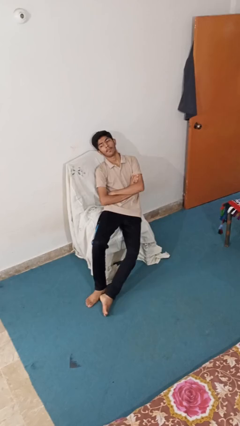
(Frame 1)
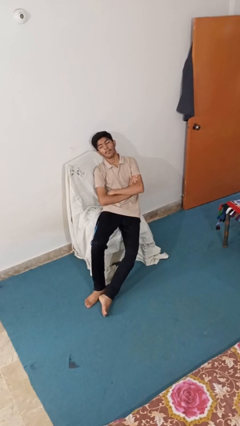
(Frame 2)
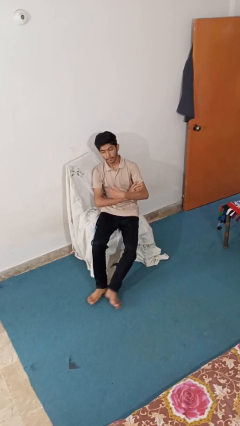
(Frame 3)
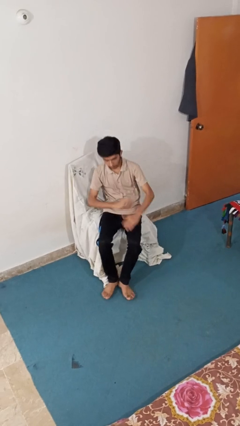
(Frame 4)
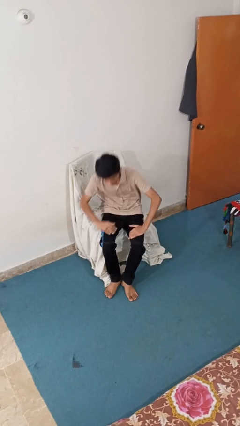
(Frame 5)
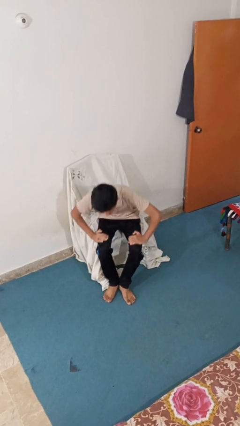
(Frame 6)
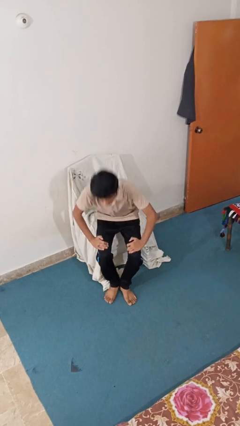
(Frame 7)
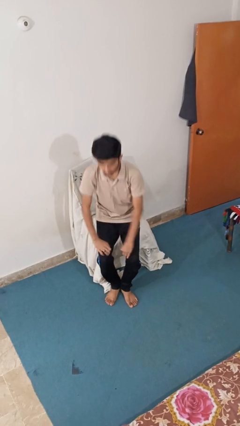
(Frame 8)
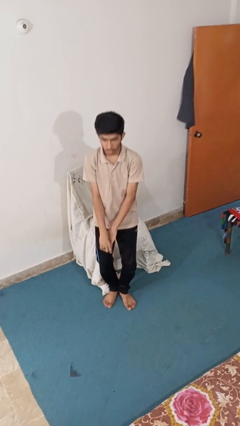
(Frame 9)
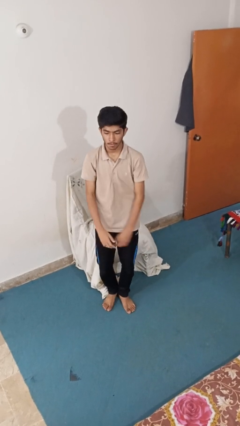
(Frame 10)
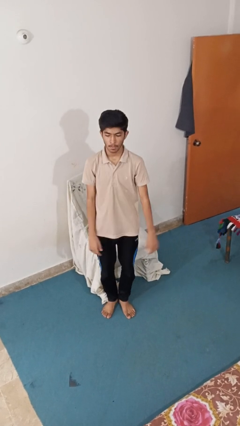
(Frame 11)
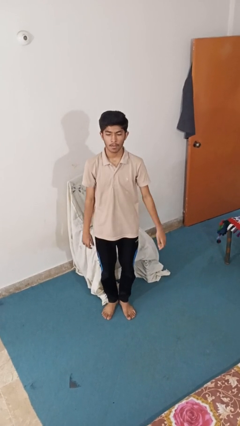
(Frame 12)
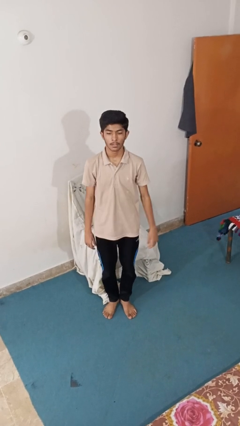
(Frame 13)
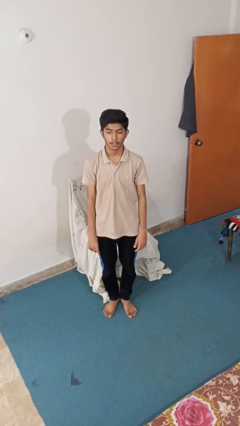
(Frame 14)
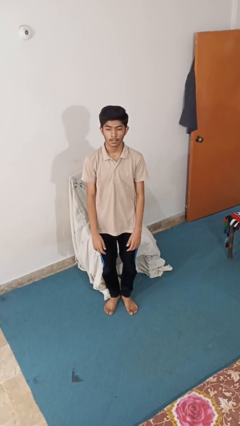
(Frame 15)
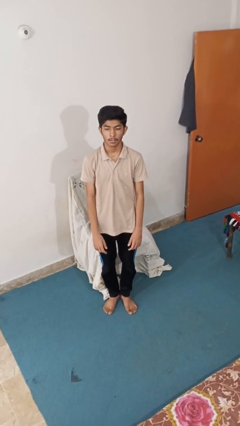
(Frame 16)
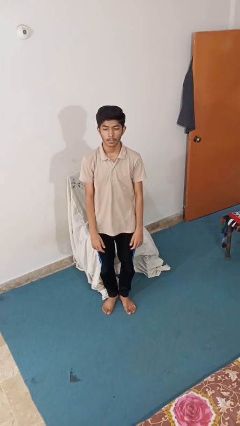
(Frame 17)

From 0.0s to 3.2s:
person stands up

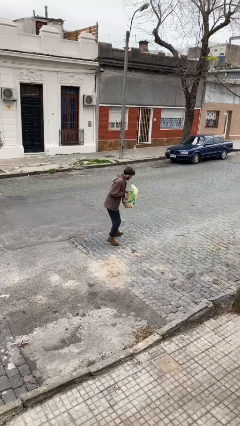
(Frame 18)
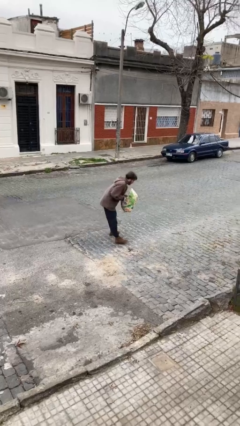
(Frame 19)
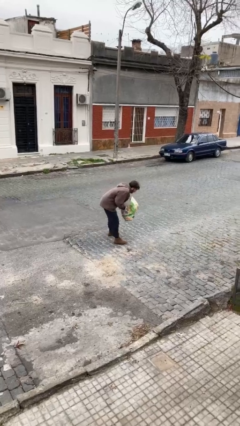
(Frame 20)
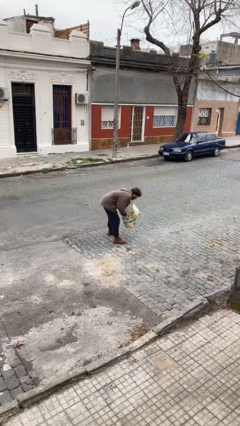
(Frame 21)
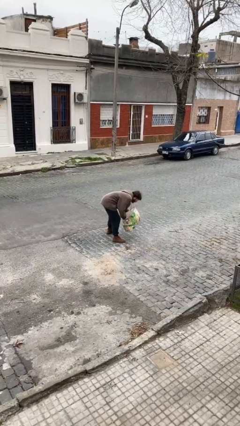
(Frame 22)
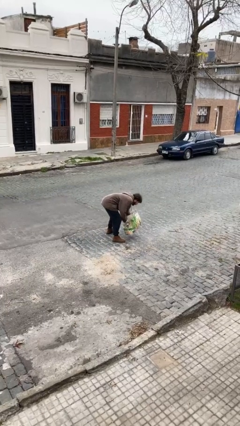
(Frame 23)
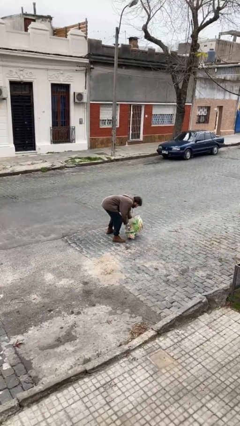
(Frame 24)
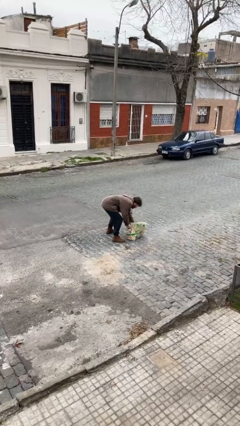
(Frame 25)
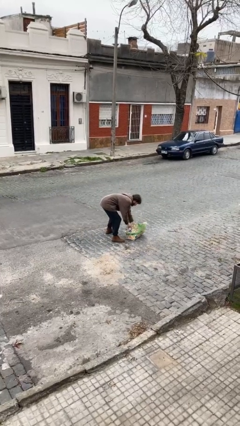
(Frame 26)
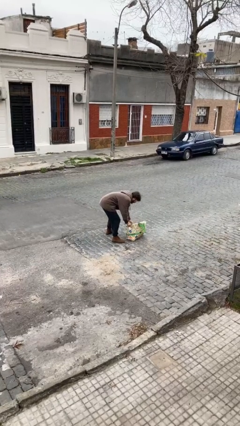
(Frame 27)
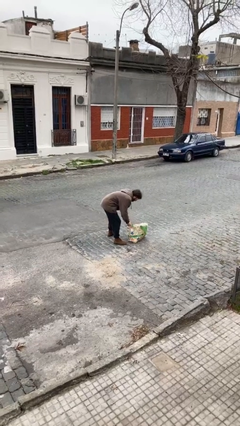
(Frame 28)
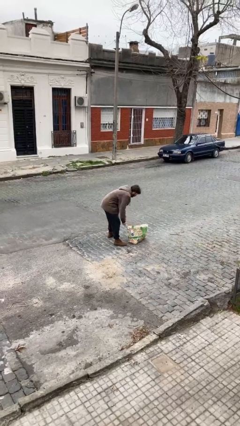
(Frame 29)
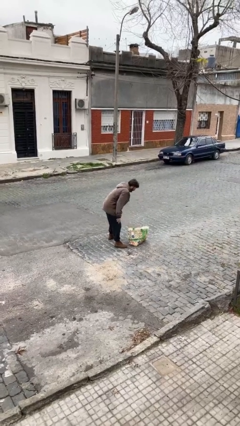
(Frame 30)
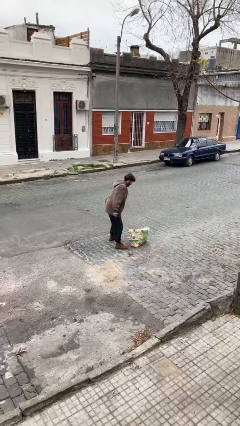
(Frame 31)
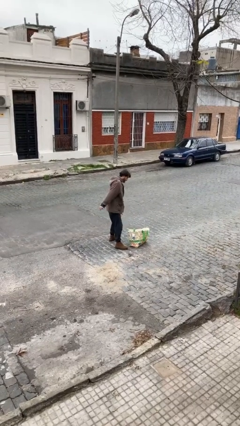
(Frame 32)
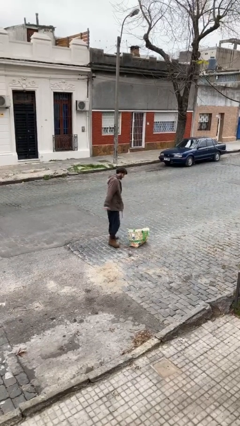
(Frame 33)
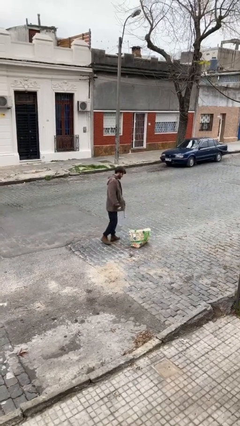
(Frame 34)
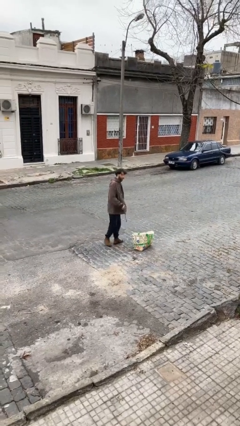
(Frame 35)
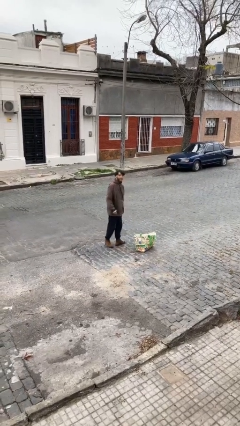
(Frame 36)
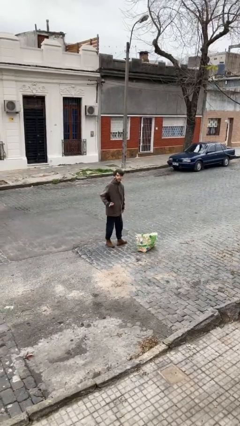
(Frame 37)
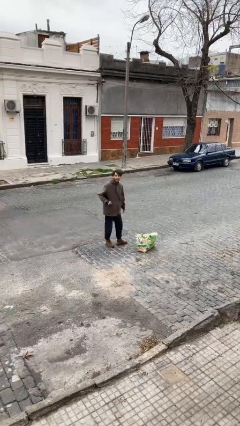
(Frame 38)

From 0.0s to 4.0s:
person puts down object on floor

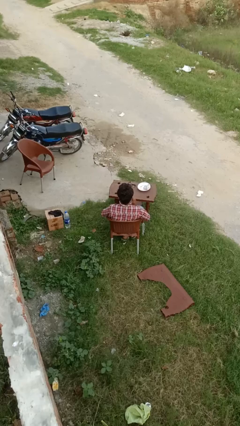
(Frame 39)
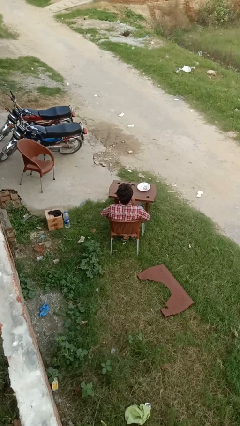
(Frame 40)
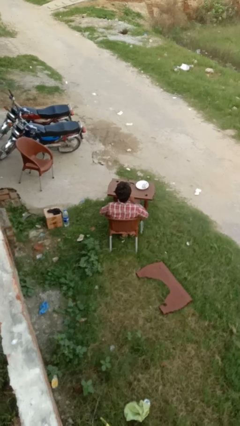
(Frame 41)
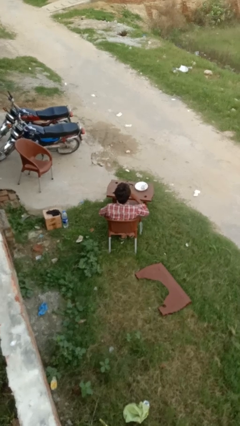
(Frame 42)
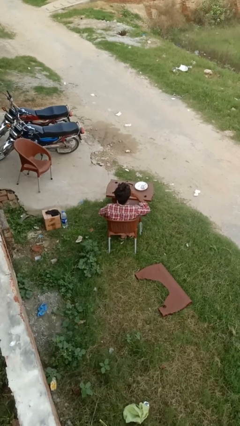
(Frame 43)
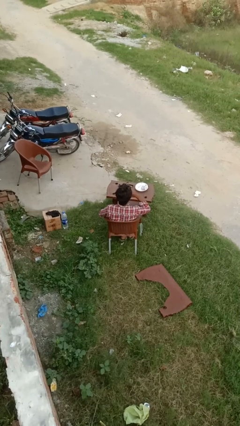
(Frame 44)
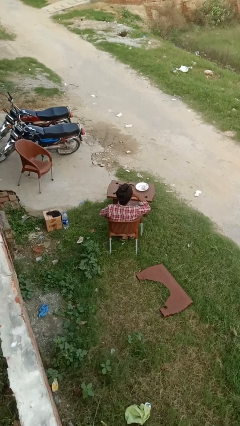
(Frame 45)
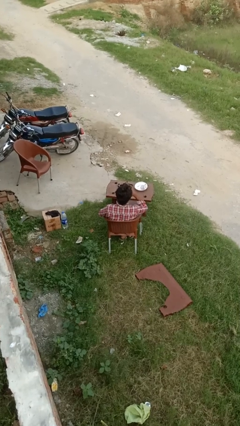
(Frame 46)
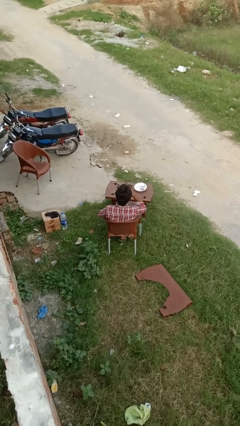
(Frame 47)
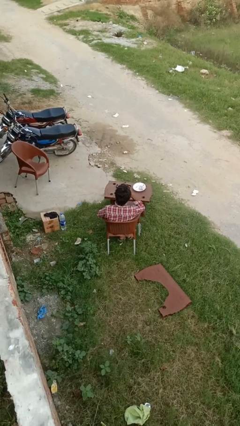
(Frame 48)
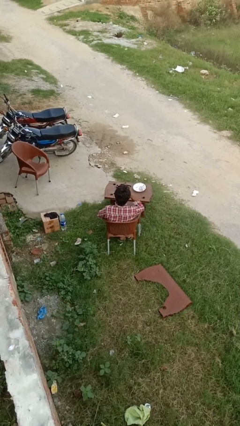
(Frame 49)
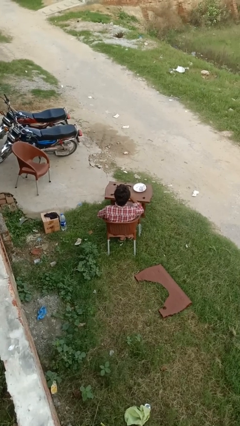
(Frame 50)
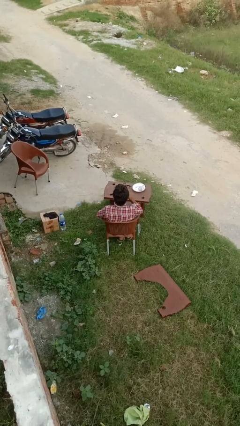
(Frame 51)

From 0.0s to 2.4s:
person brushes teeth

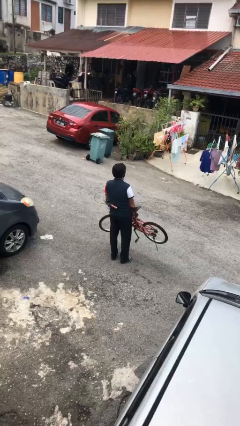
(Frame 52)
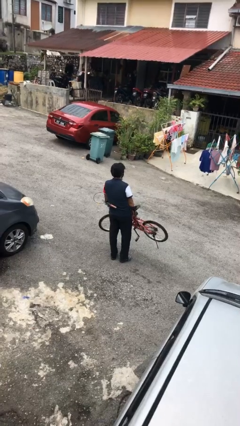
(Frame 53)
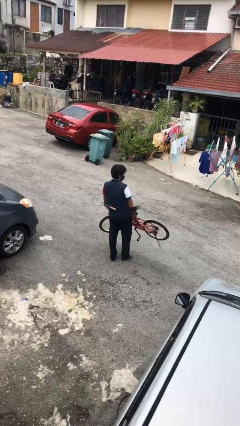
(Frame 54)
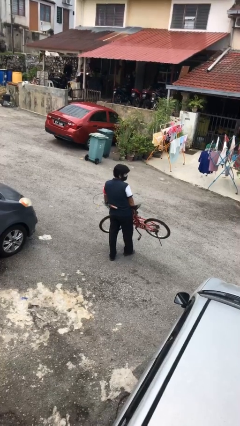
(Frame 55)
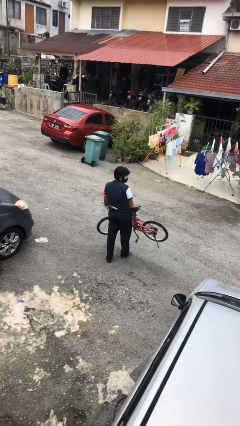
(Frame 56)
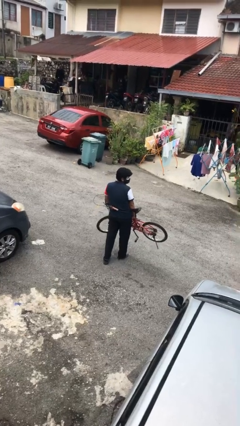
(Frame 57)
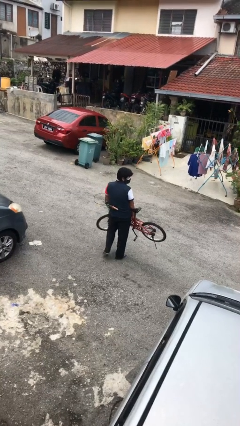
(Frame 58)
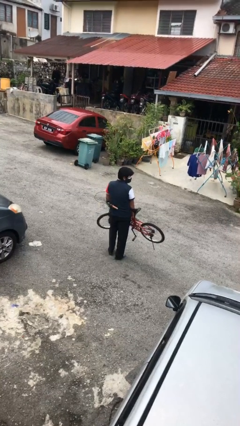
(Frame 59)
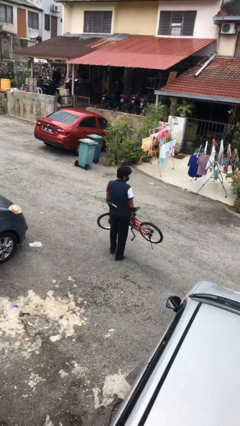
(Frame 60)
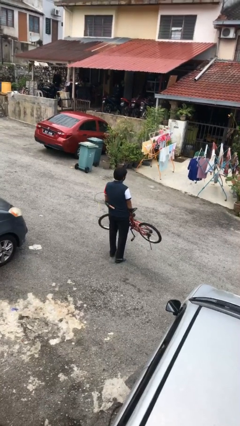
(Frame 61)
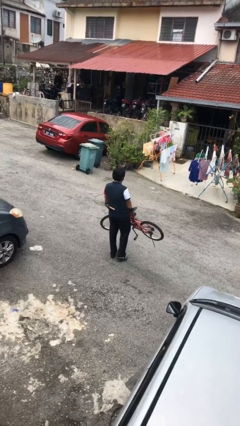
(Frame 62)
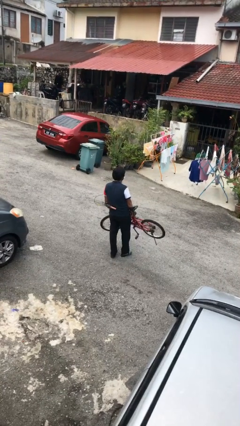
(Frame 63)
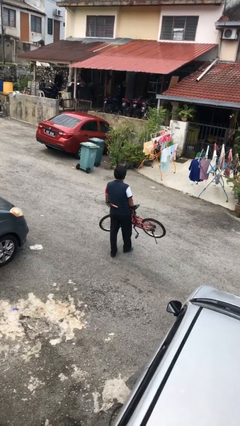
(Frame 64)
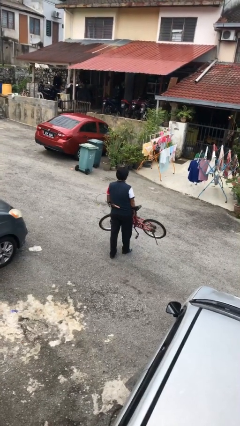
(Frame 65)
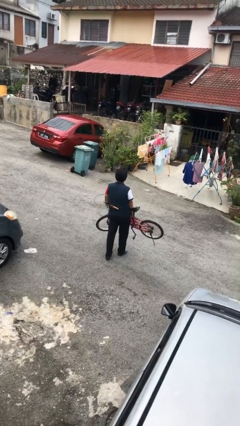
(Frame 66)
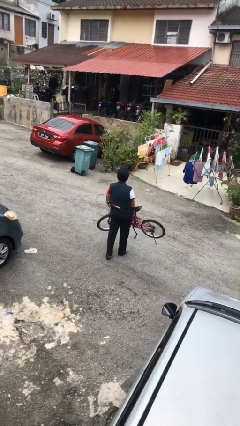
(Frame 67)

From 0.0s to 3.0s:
person carries bicycle

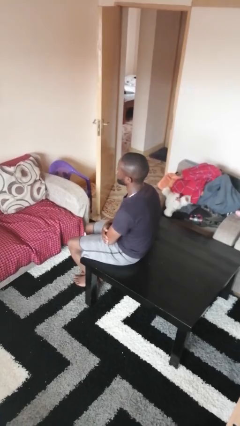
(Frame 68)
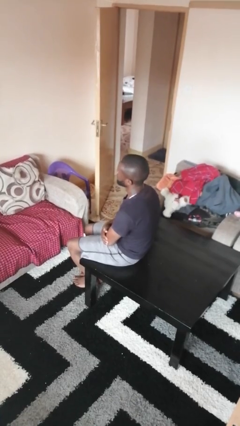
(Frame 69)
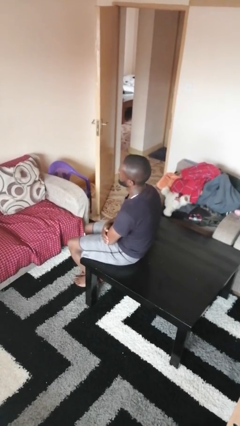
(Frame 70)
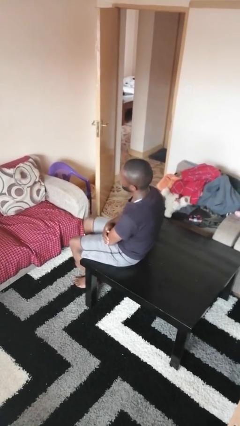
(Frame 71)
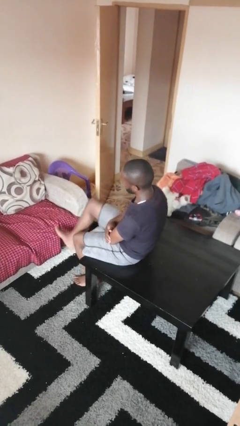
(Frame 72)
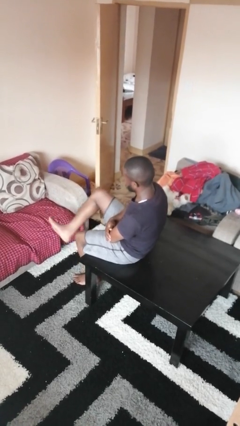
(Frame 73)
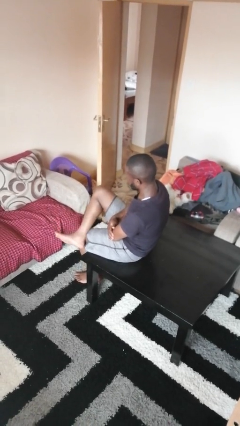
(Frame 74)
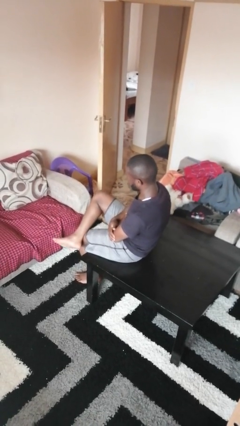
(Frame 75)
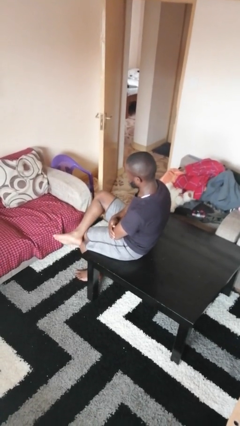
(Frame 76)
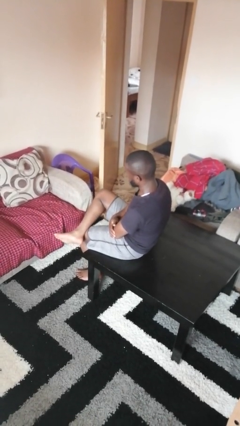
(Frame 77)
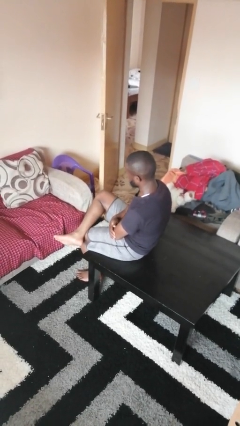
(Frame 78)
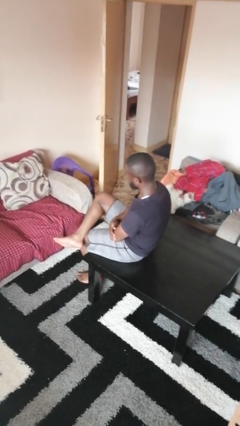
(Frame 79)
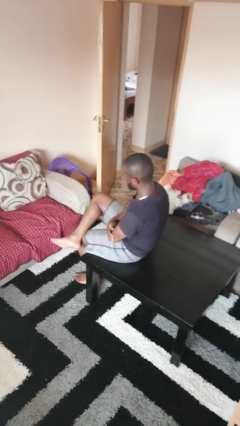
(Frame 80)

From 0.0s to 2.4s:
person crosses legs

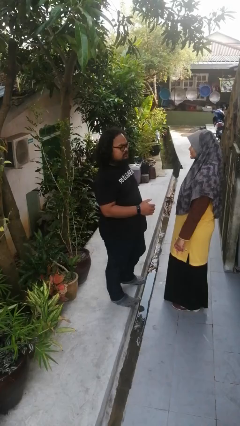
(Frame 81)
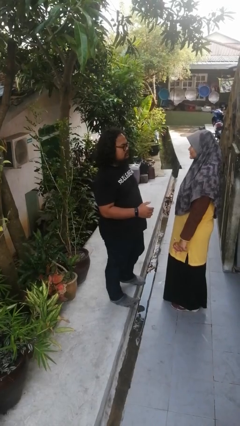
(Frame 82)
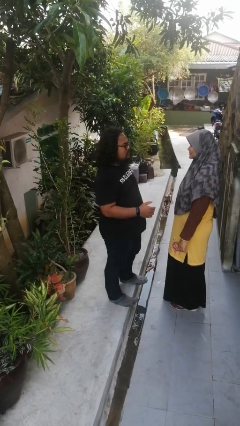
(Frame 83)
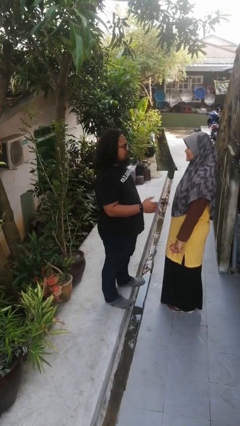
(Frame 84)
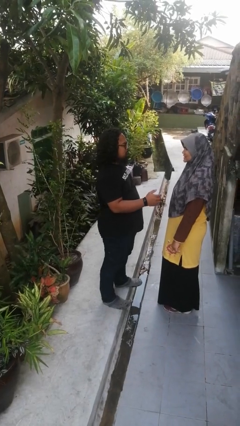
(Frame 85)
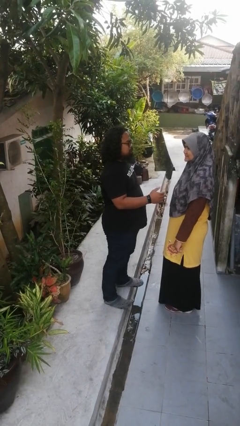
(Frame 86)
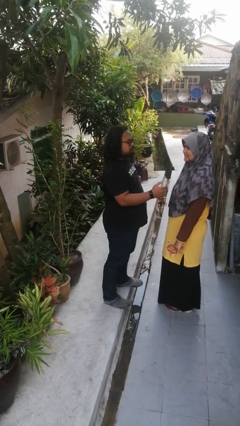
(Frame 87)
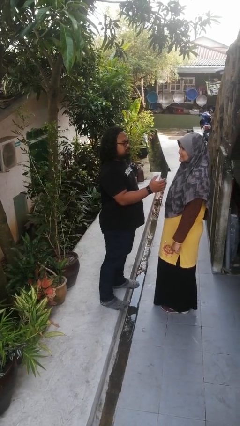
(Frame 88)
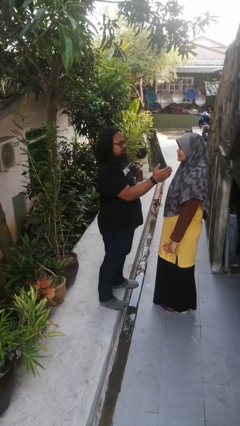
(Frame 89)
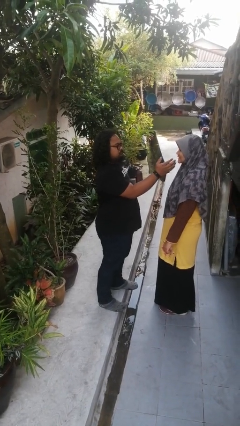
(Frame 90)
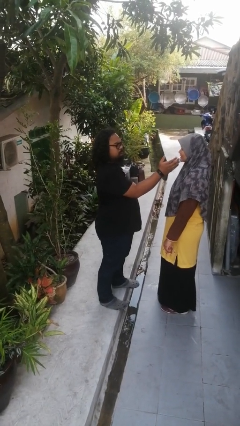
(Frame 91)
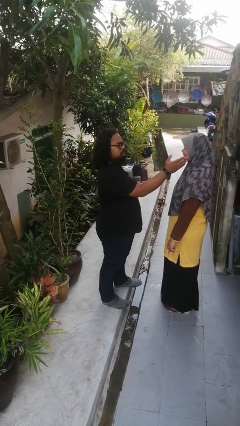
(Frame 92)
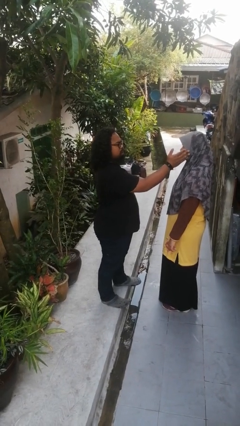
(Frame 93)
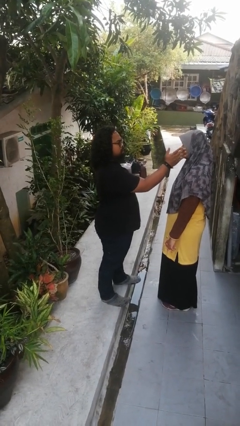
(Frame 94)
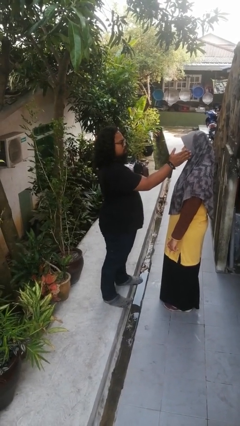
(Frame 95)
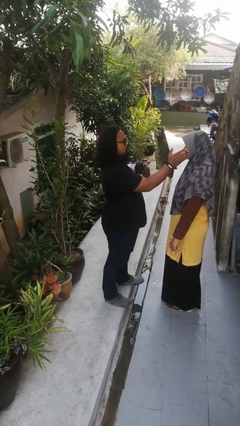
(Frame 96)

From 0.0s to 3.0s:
person touches face of person
